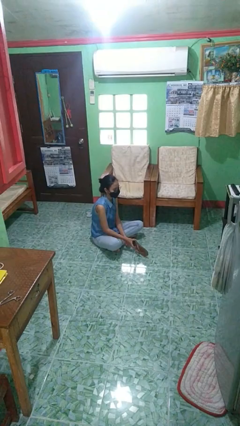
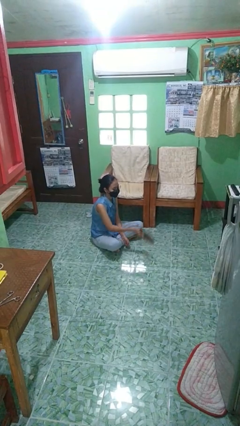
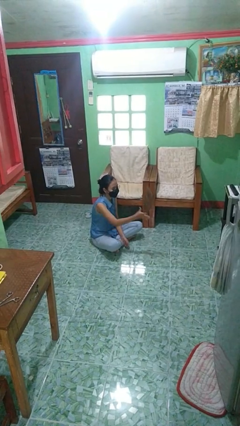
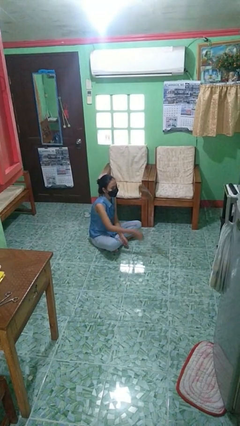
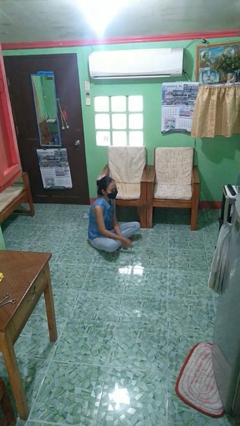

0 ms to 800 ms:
person throws object into air

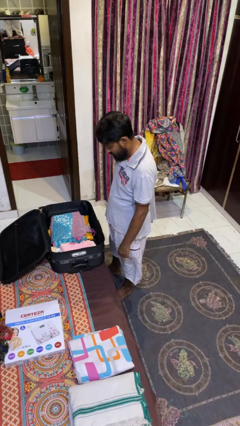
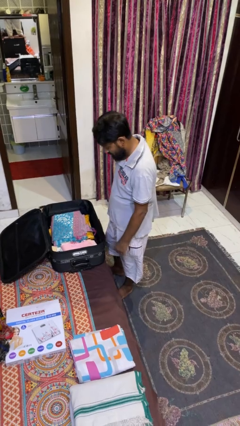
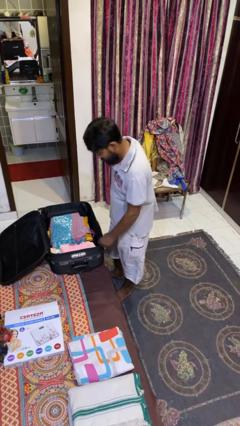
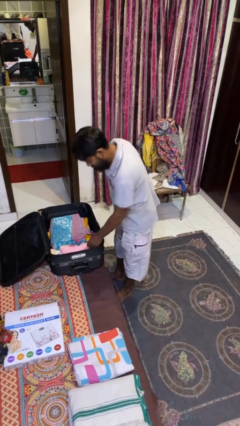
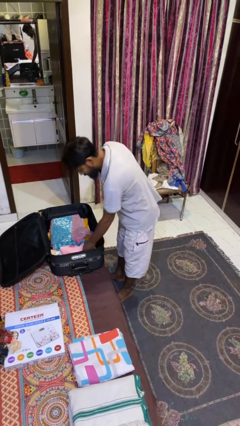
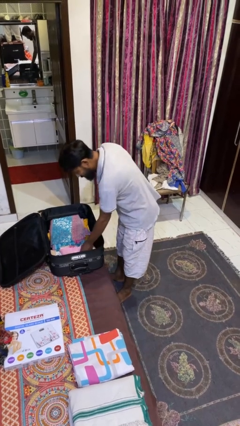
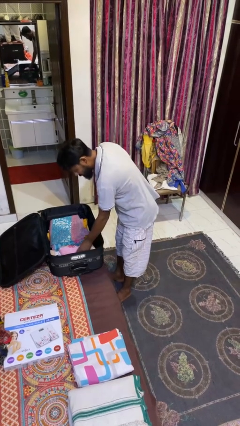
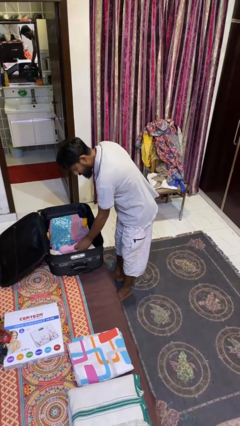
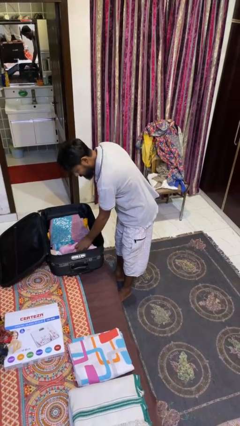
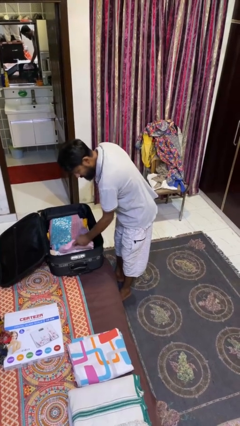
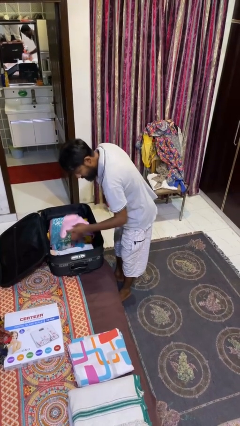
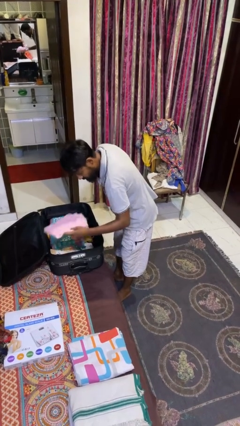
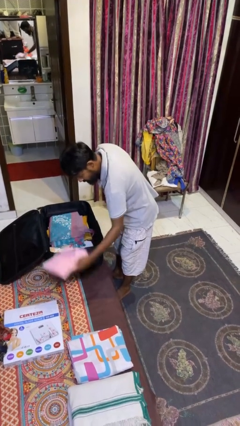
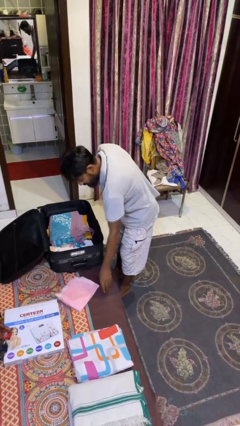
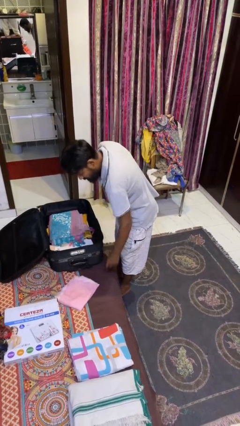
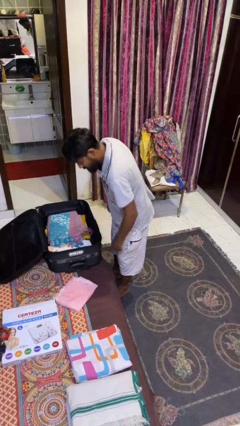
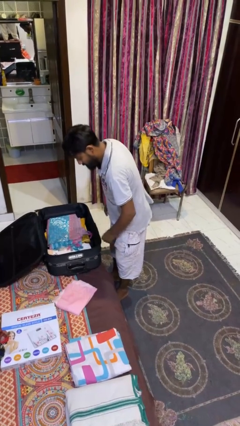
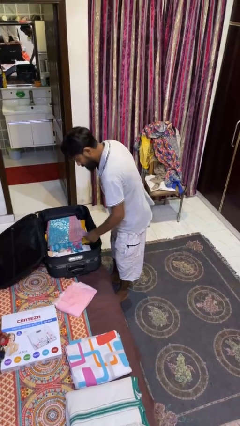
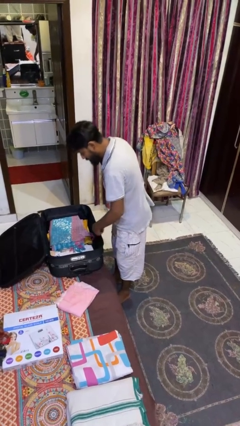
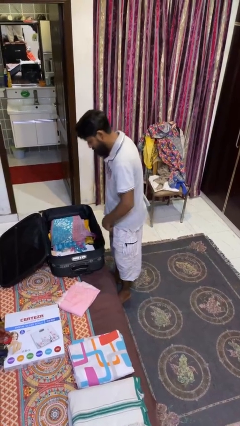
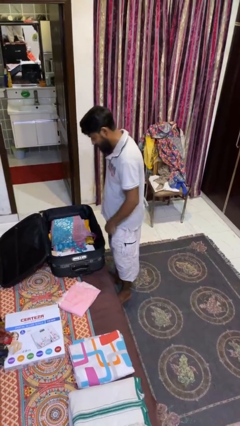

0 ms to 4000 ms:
person unloads clothes from suitcase

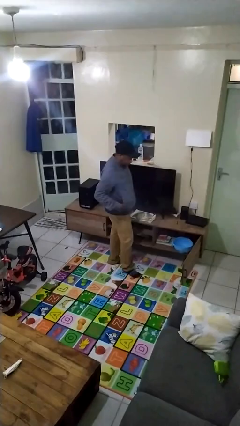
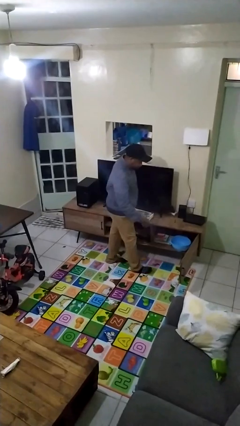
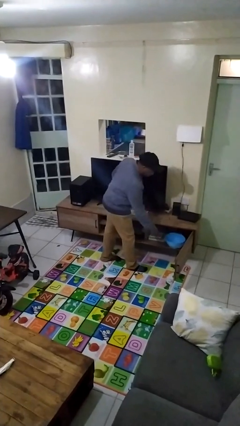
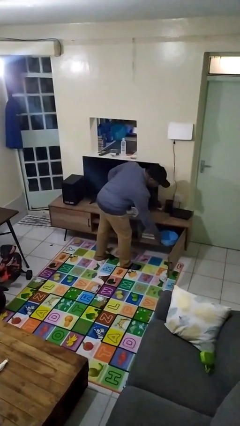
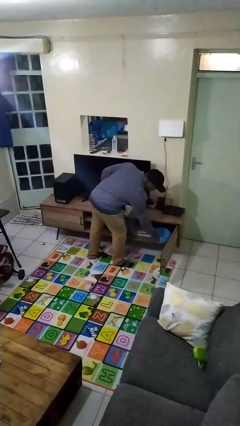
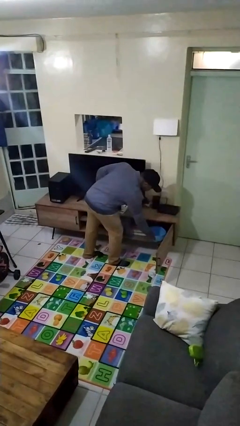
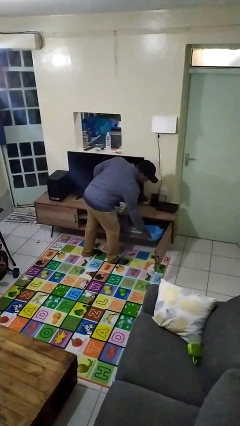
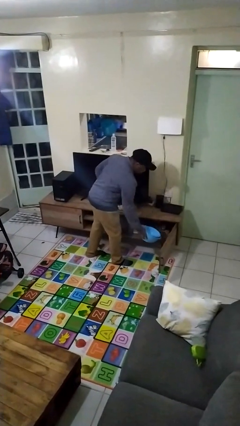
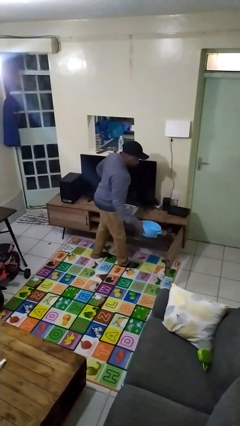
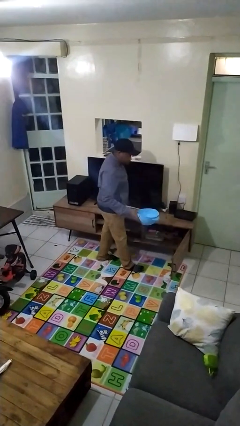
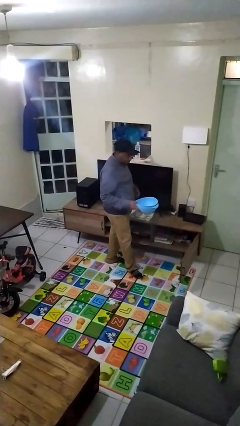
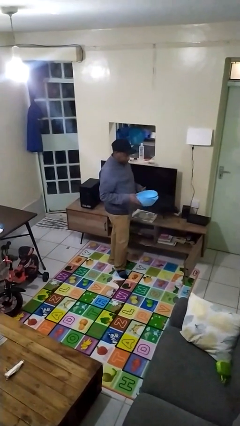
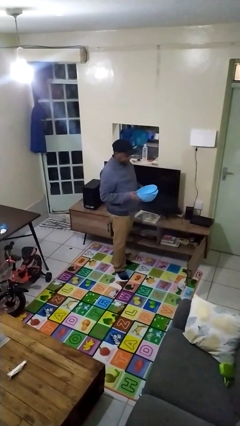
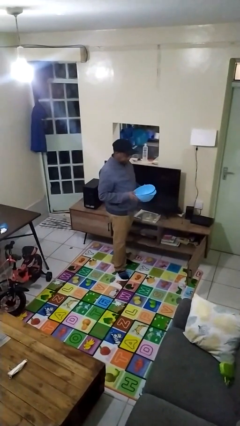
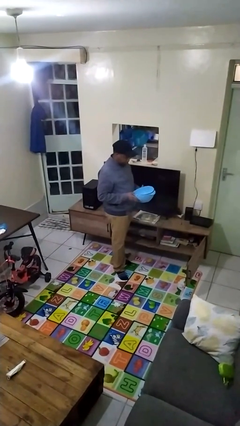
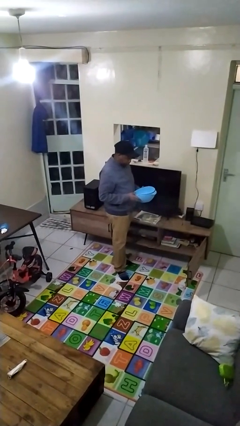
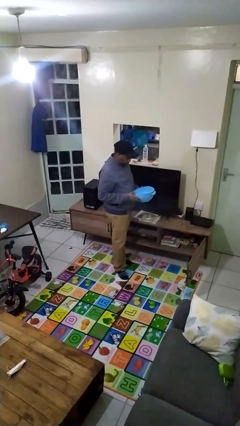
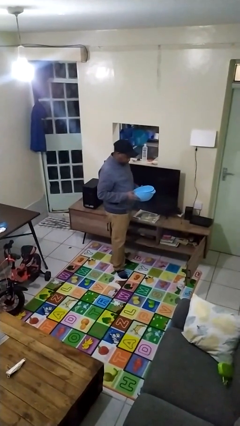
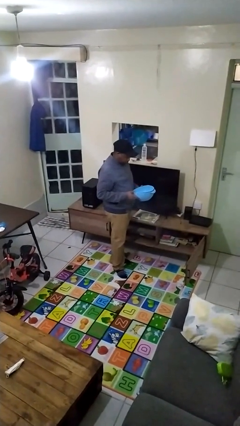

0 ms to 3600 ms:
person picks up object from cabinet

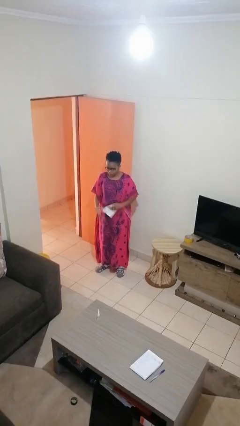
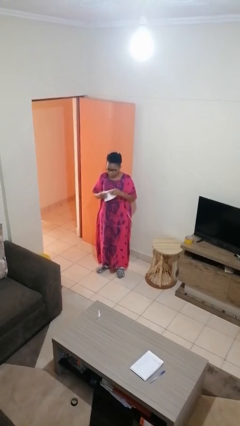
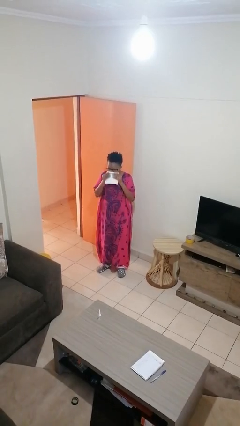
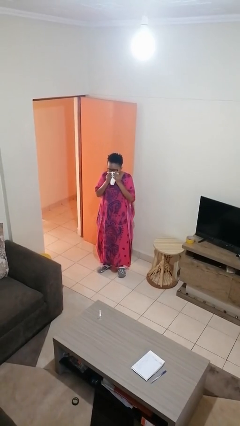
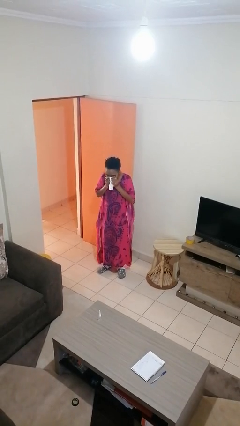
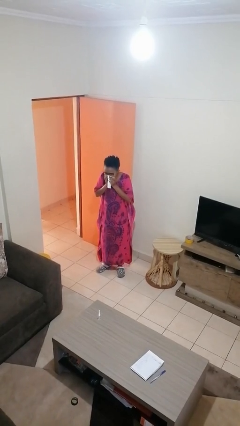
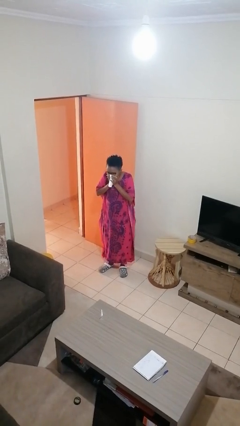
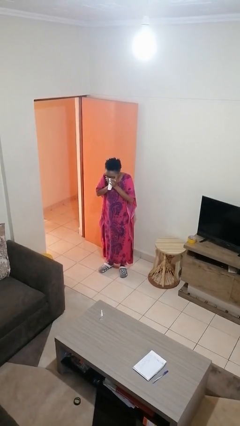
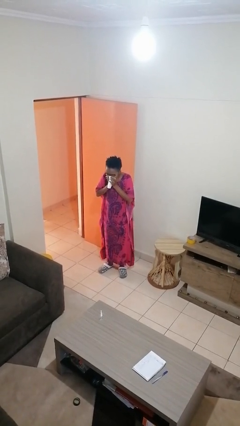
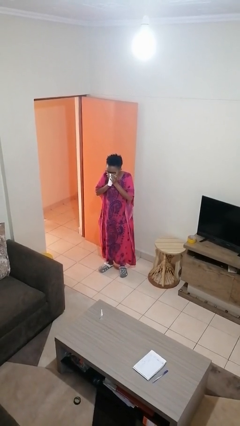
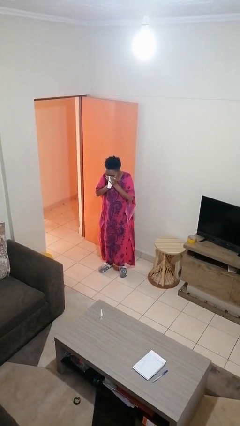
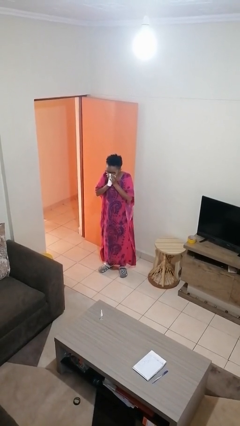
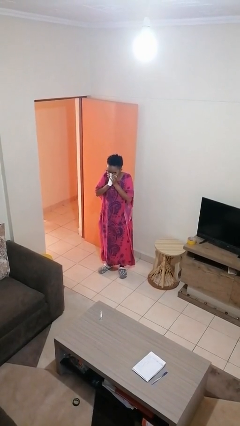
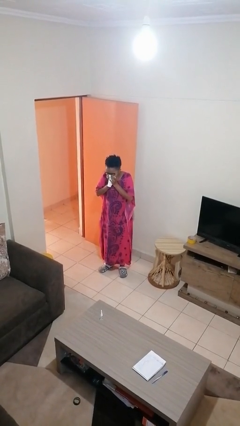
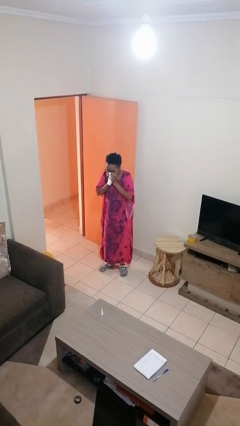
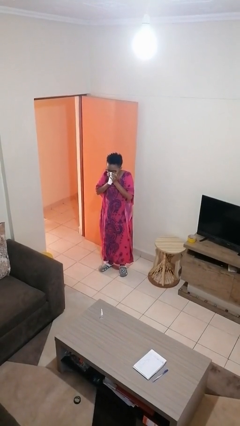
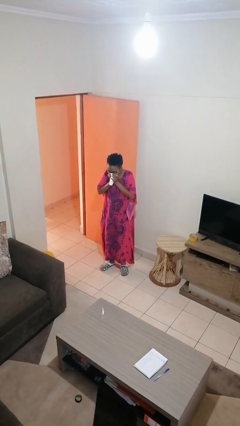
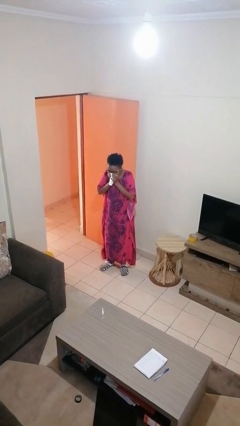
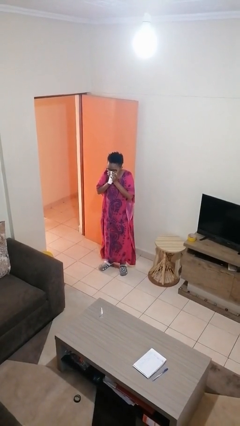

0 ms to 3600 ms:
person blows nose

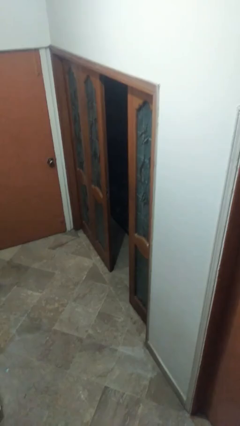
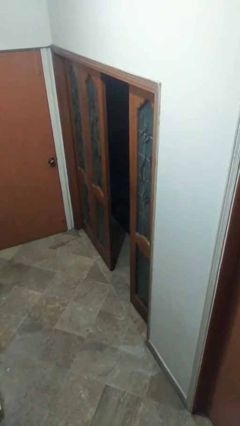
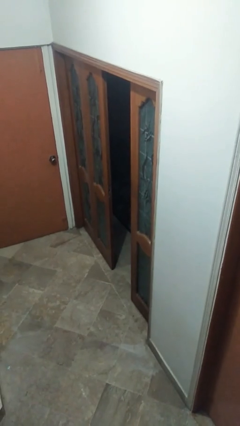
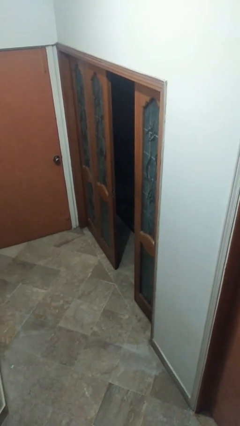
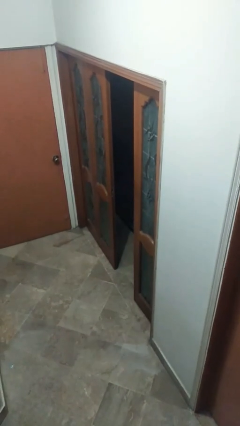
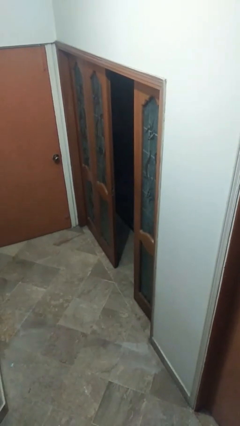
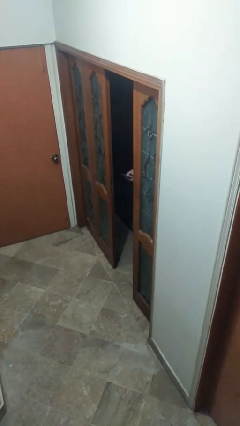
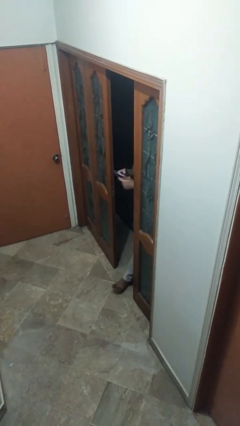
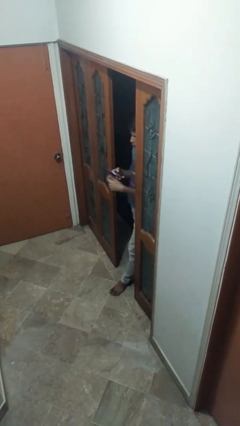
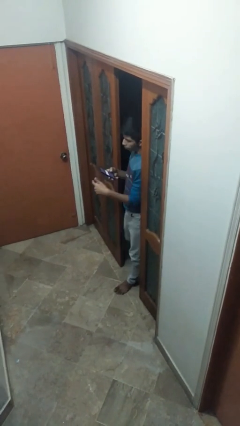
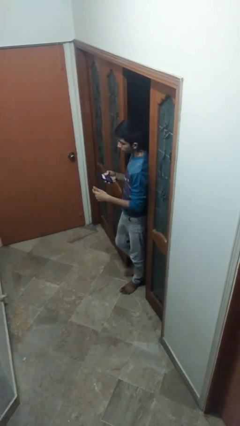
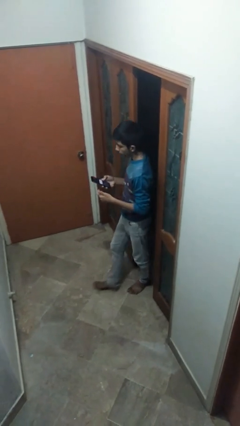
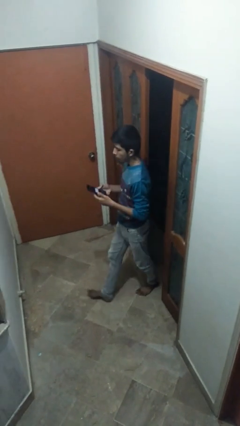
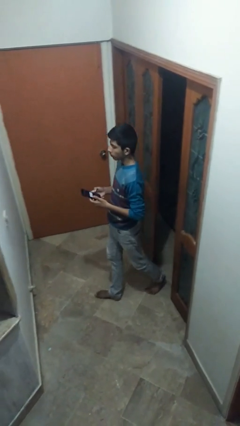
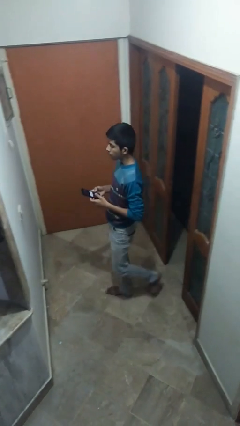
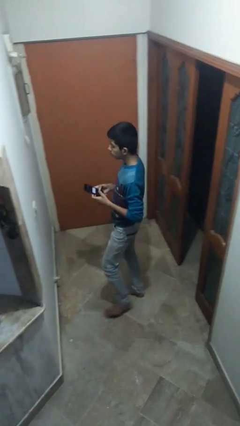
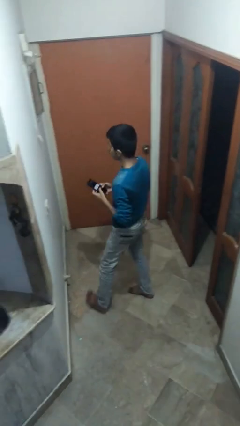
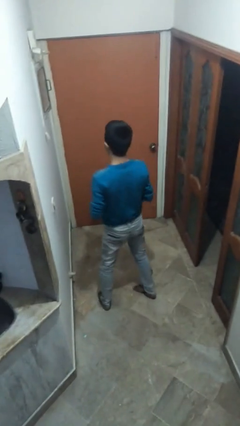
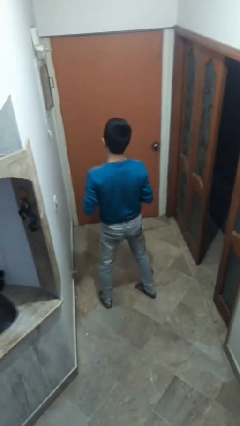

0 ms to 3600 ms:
person enters scene through structure

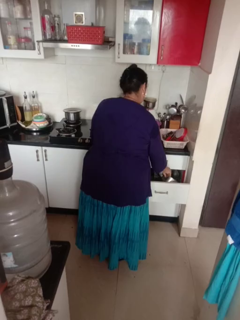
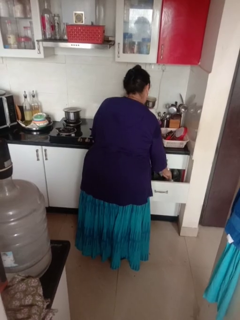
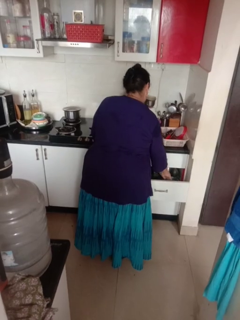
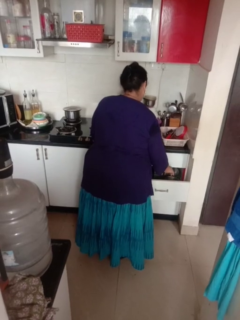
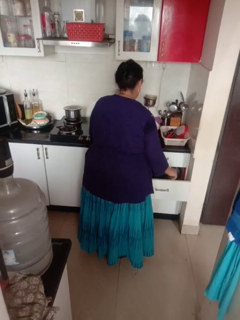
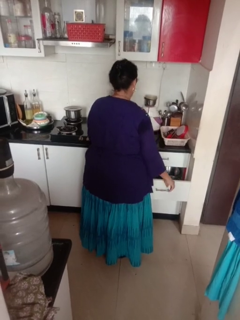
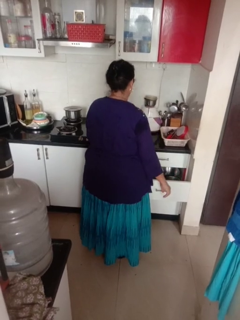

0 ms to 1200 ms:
person puts object into kitchen drawer

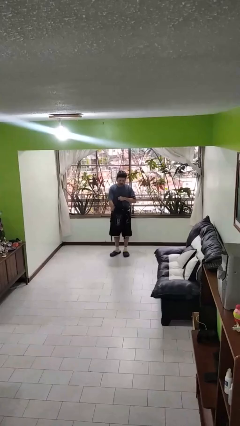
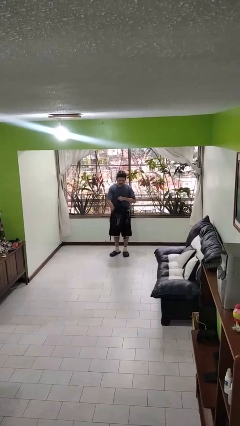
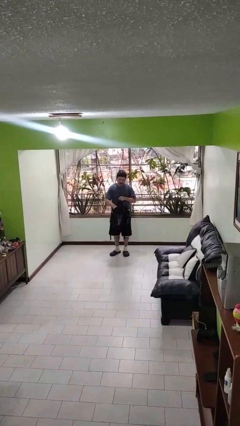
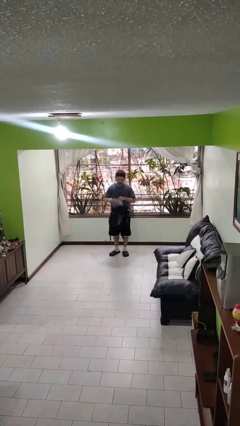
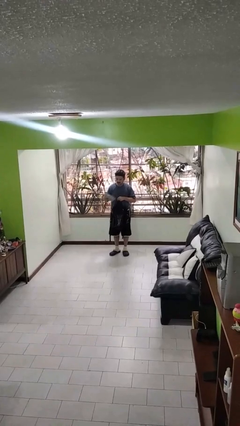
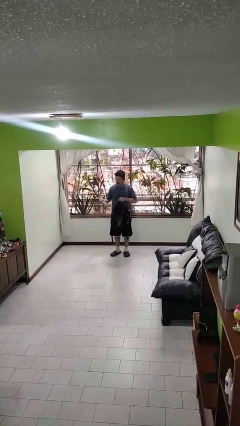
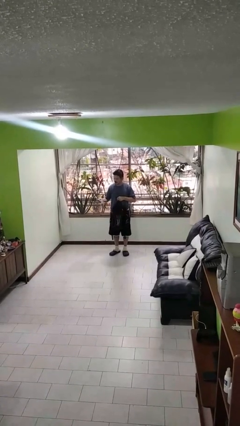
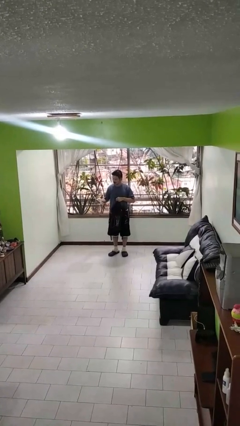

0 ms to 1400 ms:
person takes object from backpack
